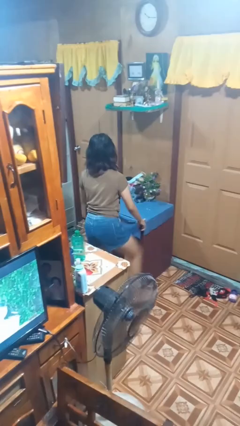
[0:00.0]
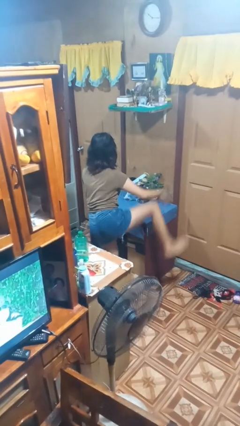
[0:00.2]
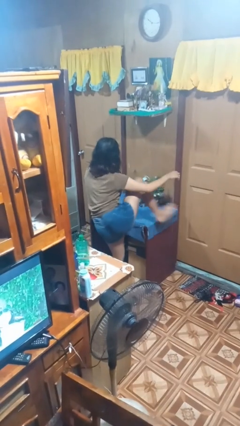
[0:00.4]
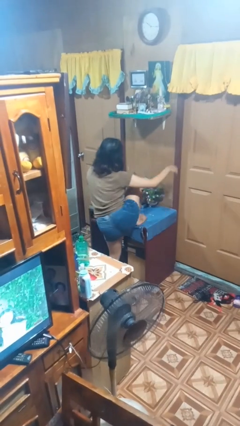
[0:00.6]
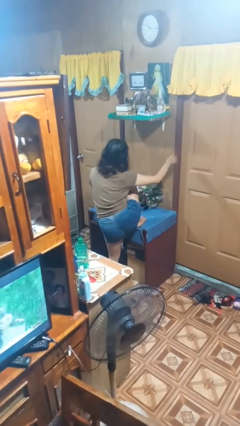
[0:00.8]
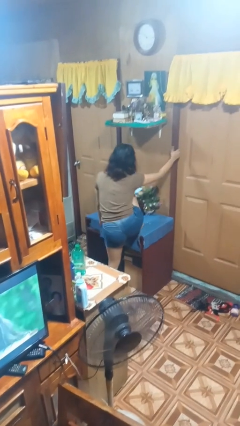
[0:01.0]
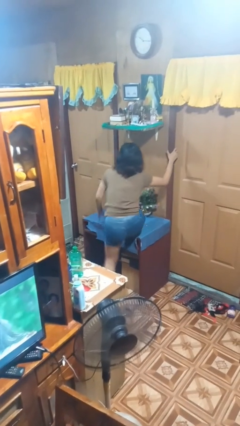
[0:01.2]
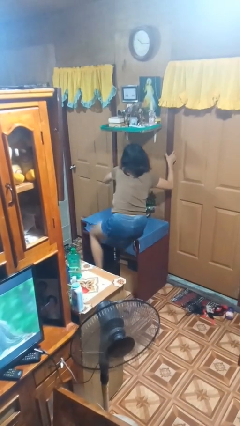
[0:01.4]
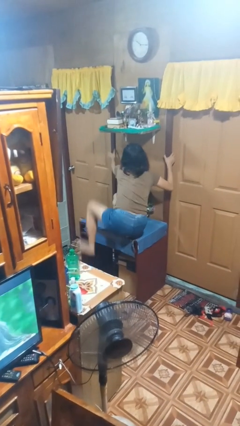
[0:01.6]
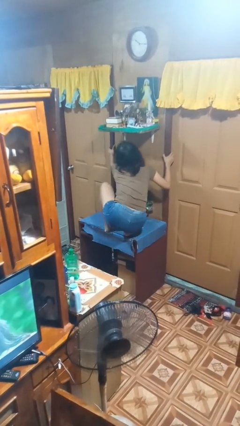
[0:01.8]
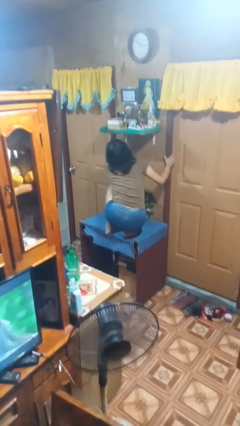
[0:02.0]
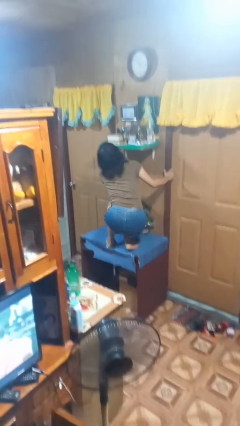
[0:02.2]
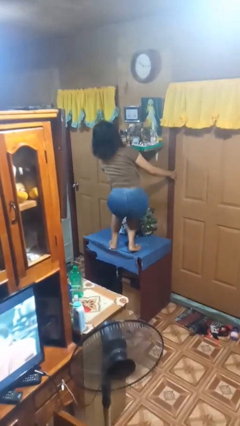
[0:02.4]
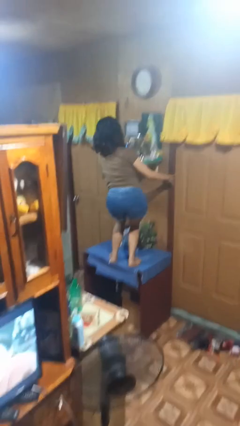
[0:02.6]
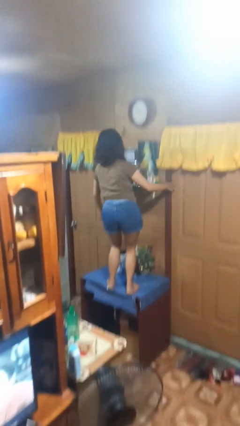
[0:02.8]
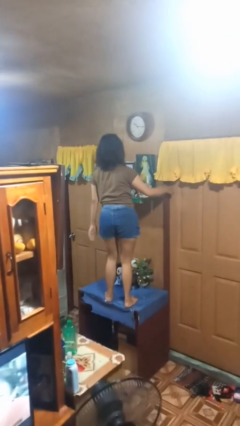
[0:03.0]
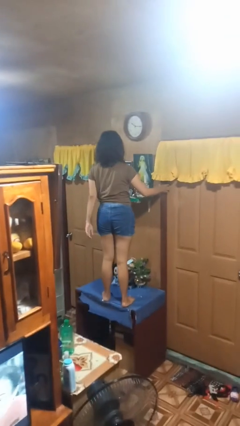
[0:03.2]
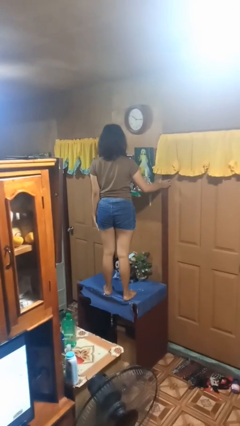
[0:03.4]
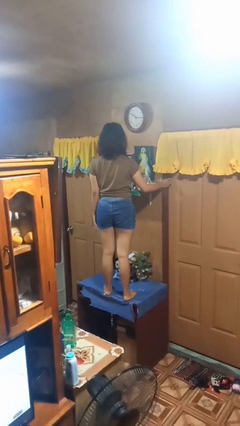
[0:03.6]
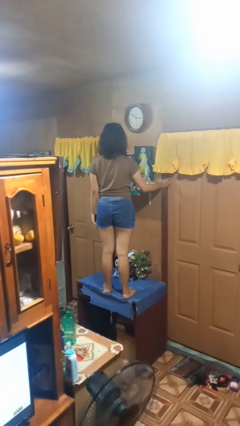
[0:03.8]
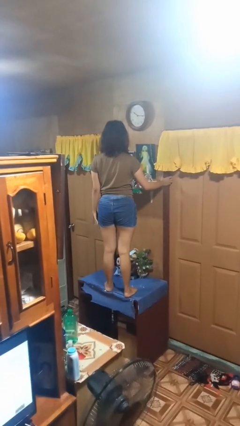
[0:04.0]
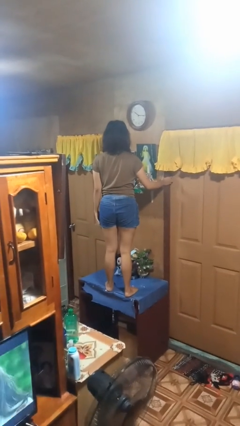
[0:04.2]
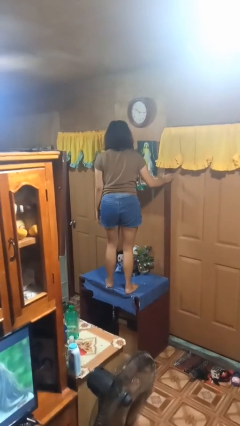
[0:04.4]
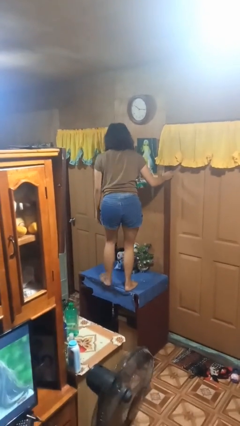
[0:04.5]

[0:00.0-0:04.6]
person climbs on table

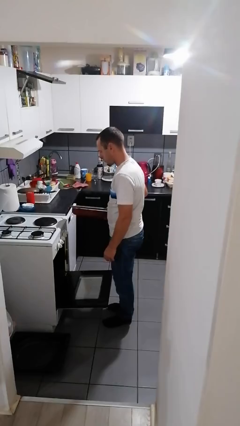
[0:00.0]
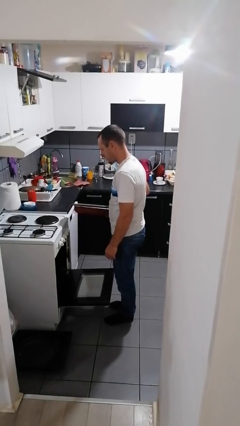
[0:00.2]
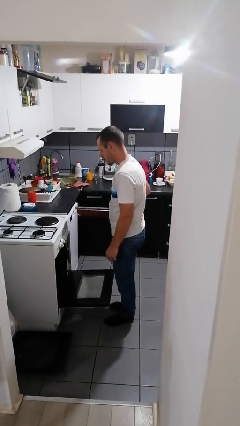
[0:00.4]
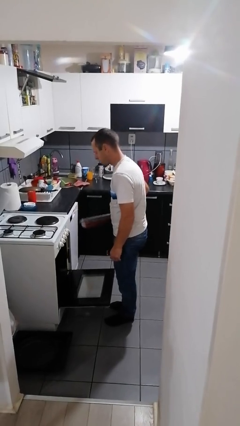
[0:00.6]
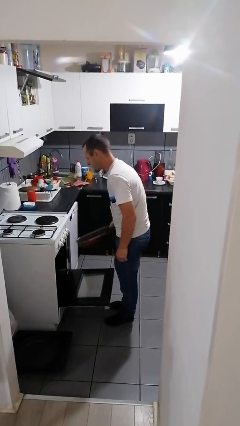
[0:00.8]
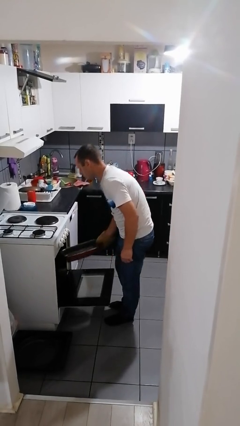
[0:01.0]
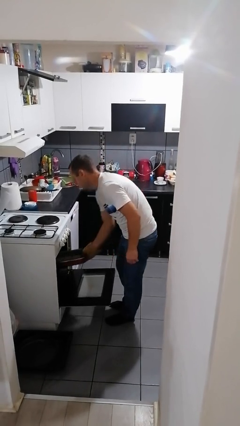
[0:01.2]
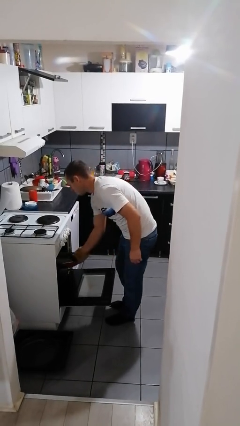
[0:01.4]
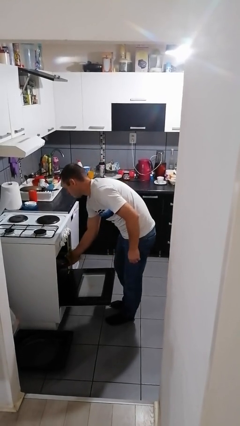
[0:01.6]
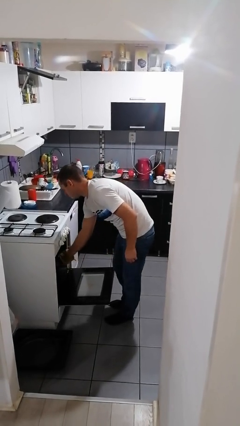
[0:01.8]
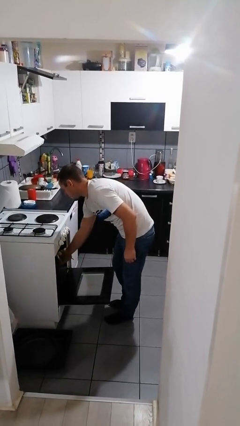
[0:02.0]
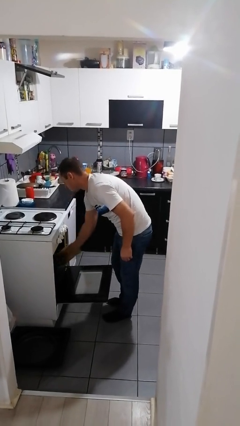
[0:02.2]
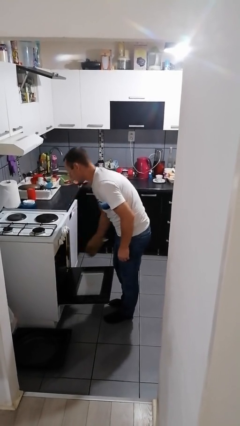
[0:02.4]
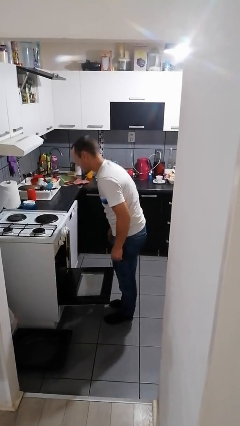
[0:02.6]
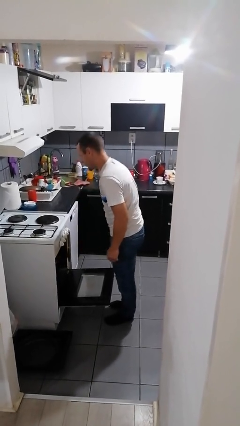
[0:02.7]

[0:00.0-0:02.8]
person puts object into oven

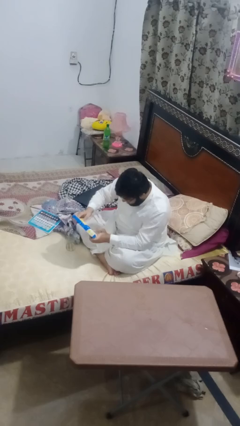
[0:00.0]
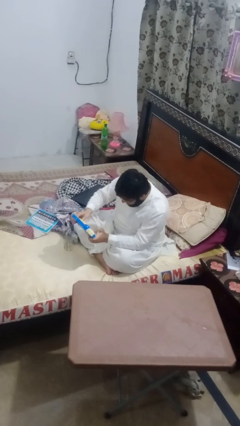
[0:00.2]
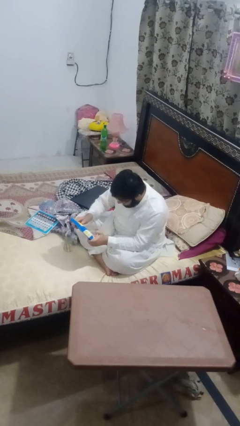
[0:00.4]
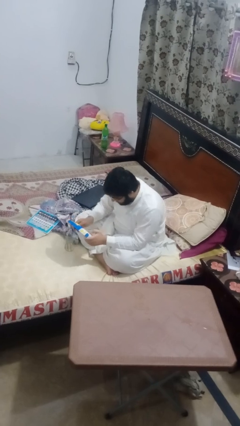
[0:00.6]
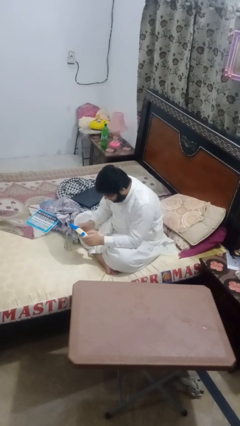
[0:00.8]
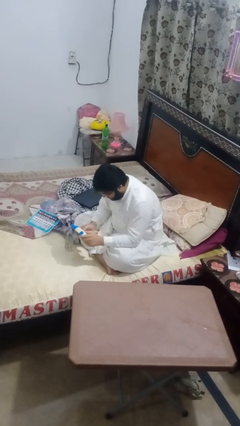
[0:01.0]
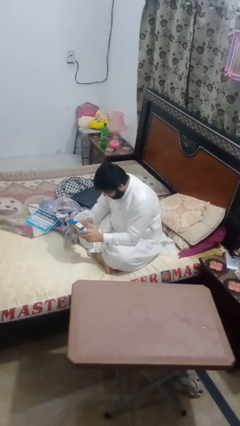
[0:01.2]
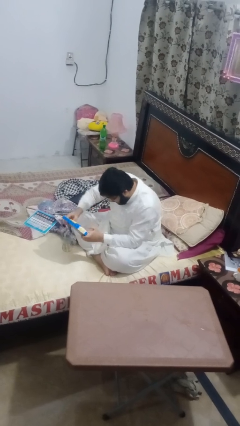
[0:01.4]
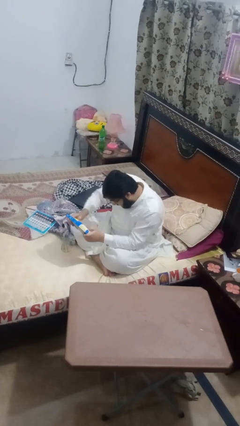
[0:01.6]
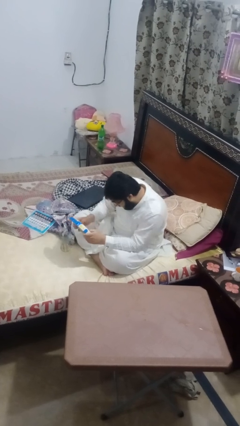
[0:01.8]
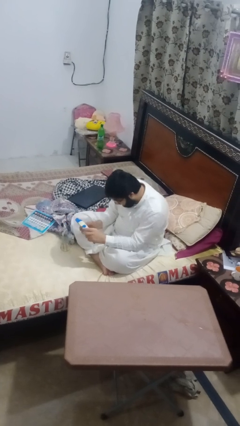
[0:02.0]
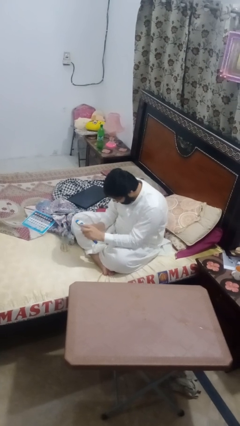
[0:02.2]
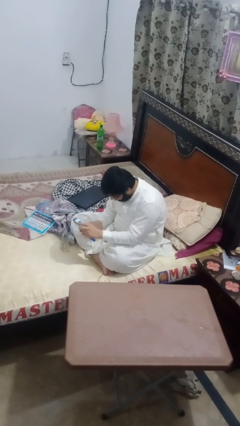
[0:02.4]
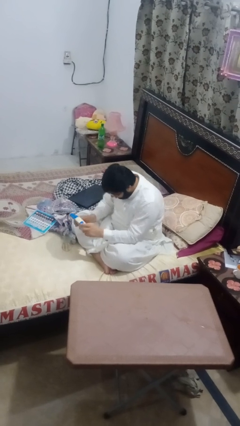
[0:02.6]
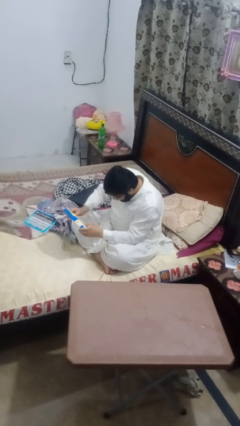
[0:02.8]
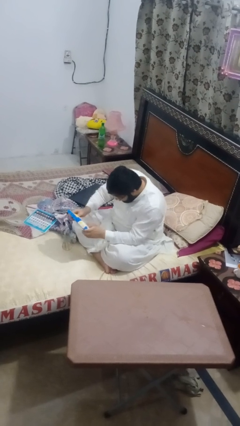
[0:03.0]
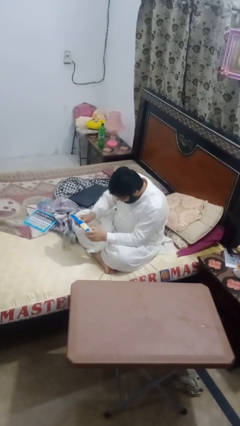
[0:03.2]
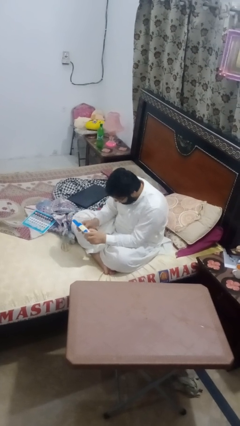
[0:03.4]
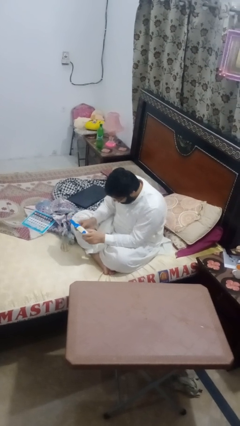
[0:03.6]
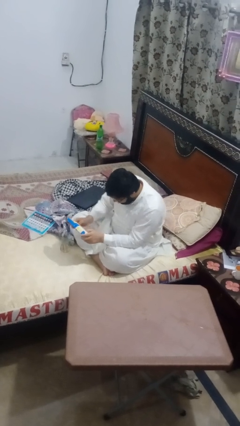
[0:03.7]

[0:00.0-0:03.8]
person interacts with handheld game

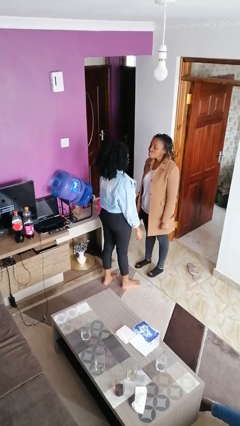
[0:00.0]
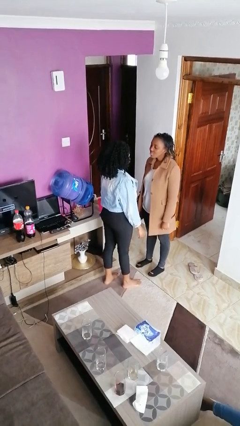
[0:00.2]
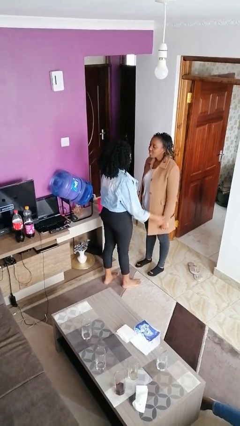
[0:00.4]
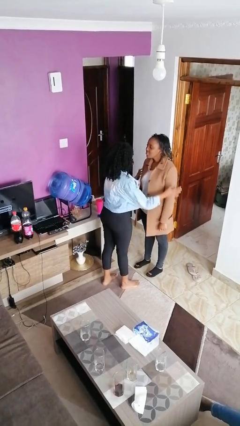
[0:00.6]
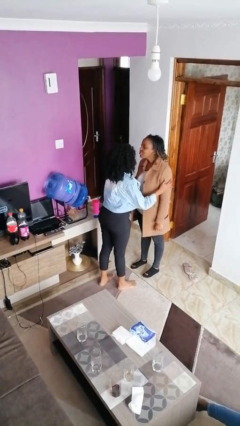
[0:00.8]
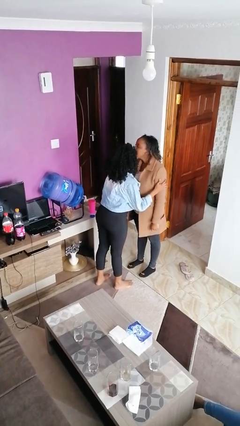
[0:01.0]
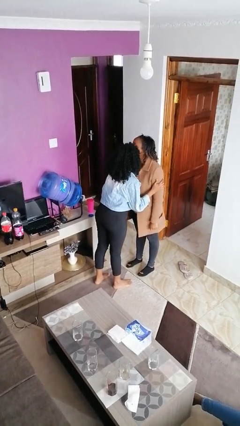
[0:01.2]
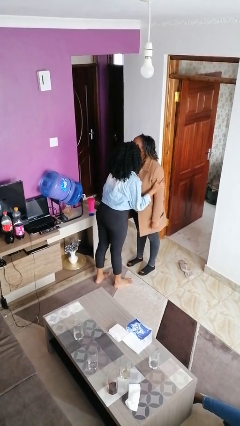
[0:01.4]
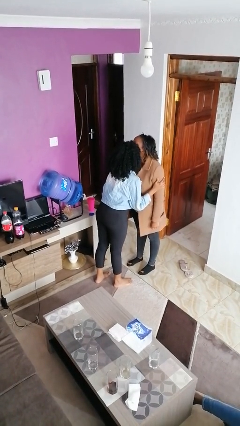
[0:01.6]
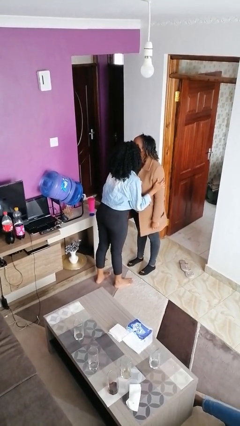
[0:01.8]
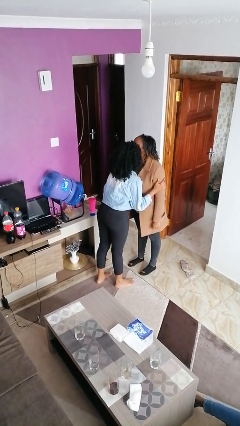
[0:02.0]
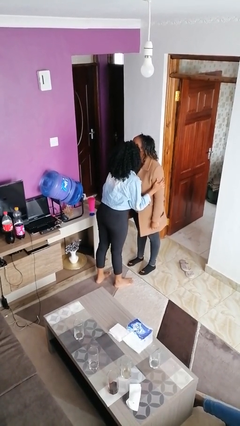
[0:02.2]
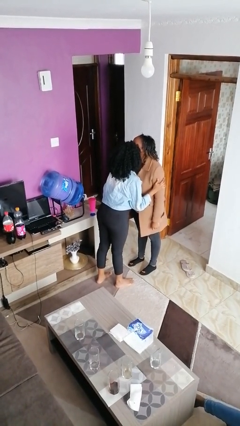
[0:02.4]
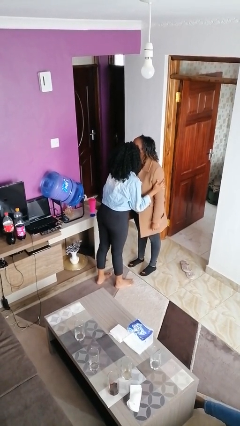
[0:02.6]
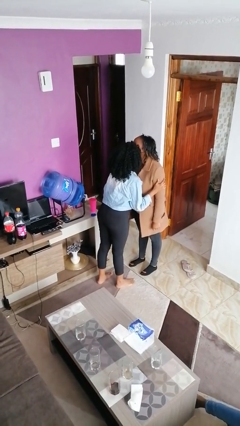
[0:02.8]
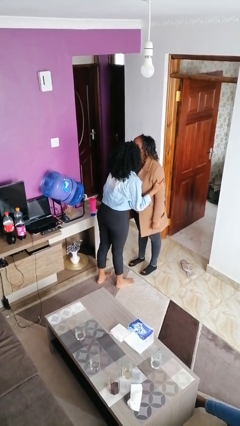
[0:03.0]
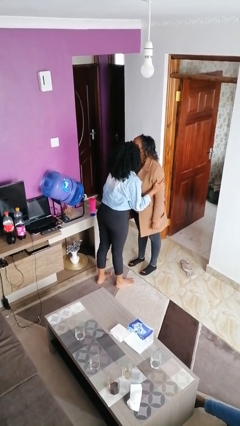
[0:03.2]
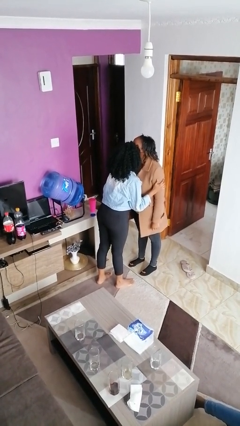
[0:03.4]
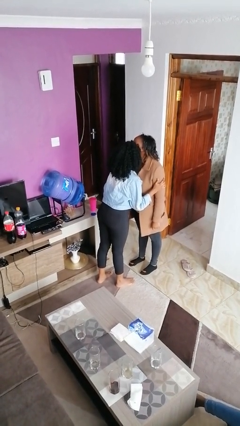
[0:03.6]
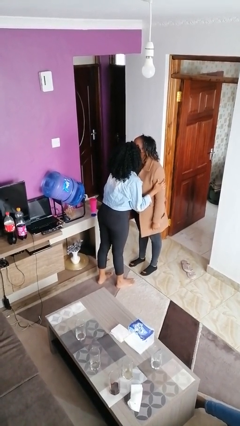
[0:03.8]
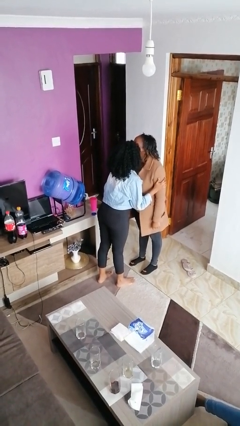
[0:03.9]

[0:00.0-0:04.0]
person kisses cheek of person

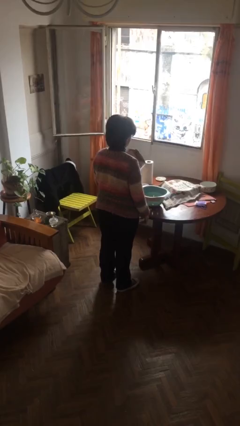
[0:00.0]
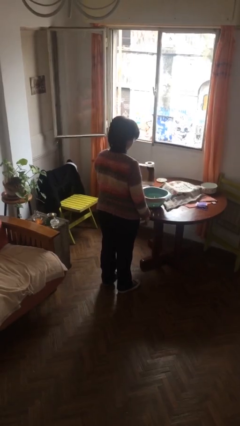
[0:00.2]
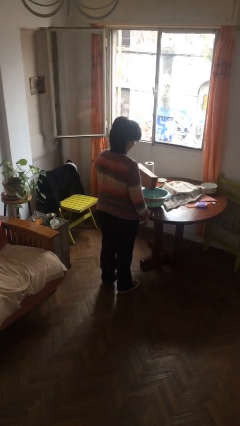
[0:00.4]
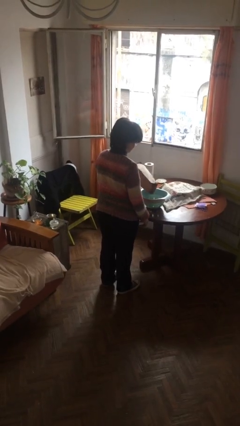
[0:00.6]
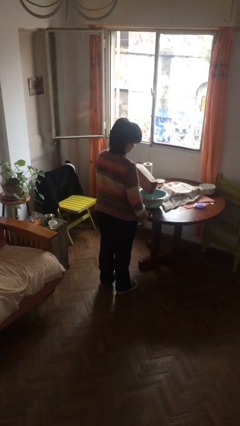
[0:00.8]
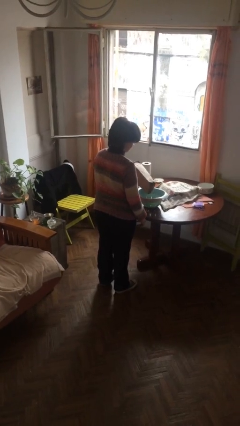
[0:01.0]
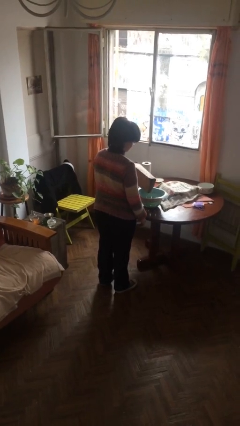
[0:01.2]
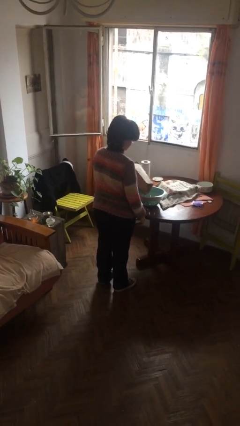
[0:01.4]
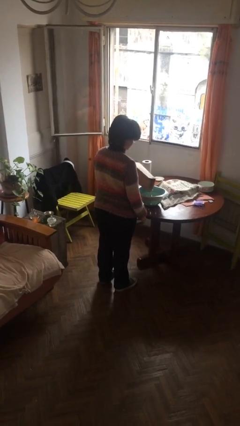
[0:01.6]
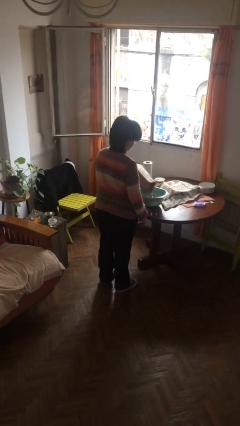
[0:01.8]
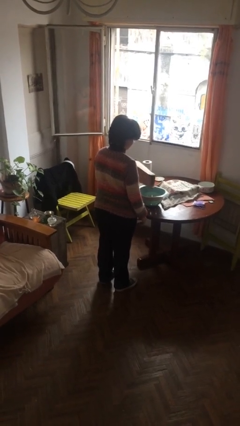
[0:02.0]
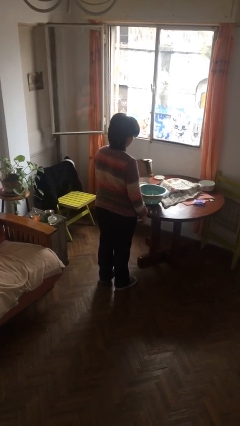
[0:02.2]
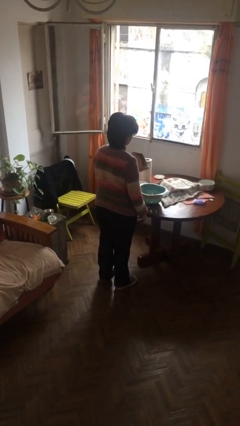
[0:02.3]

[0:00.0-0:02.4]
person pours into bowl
